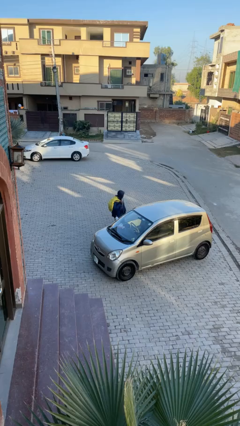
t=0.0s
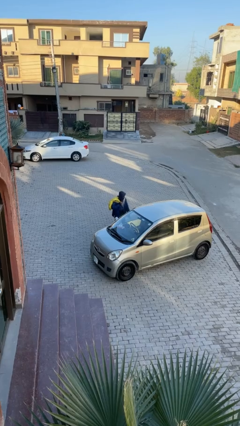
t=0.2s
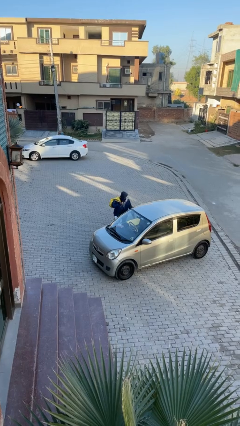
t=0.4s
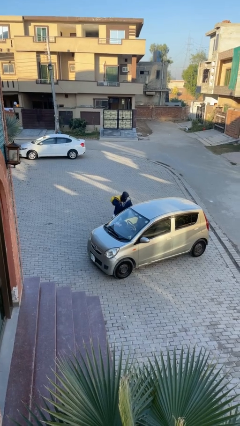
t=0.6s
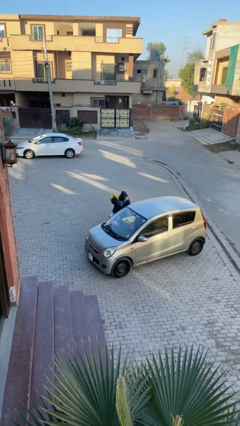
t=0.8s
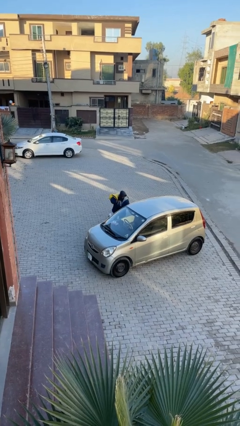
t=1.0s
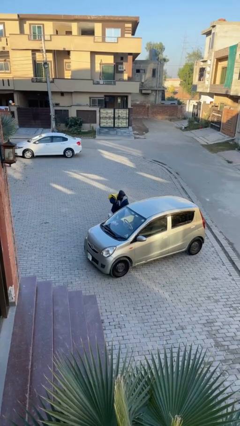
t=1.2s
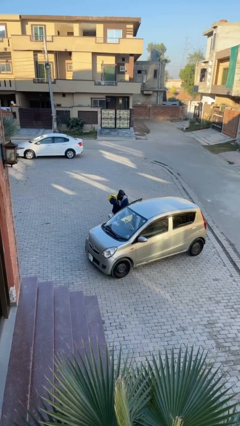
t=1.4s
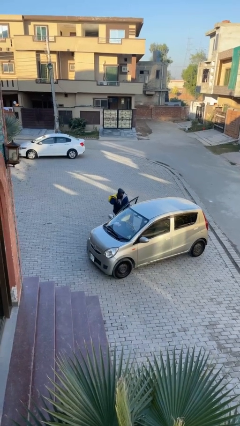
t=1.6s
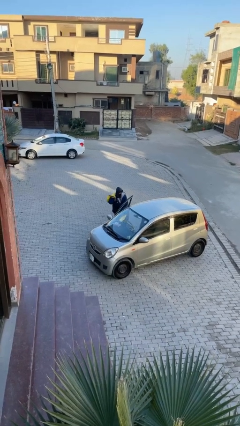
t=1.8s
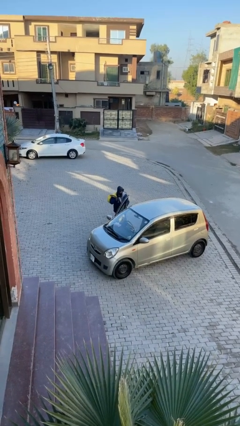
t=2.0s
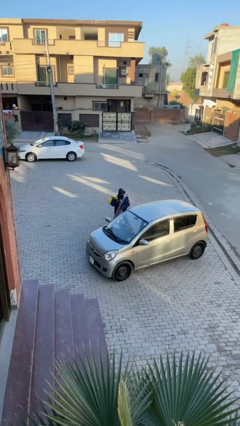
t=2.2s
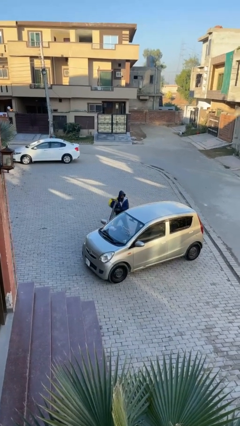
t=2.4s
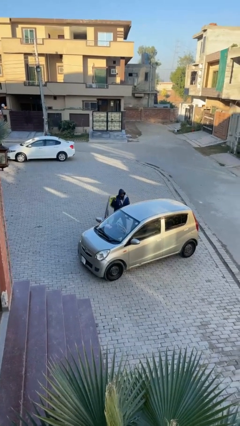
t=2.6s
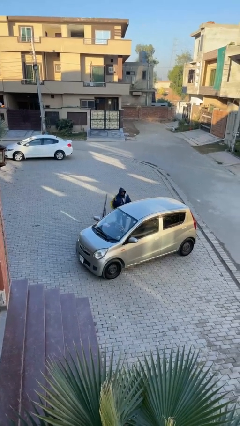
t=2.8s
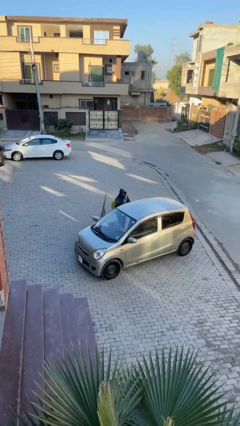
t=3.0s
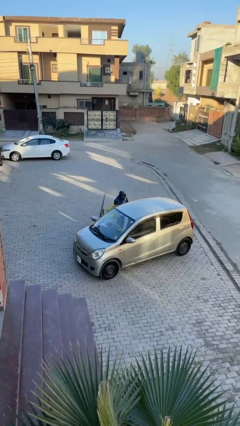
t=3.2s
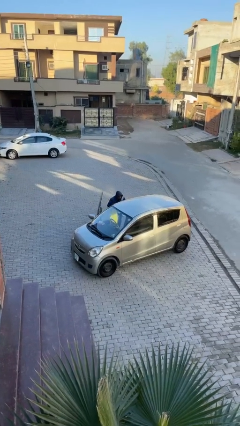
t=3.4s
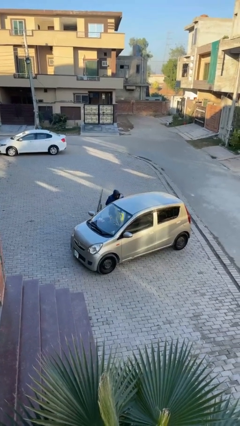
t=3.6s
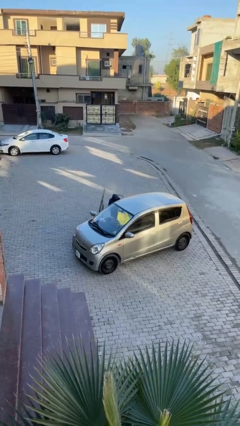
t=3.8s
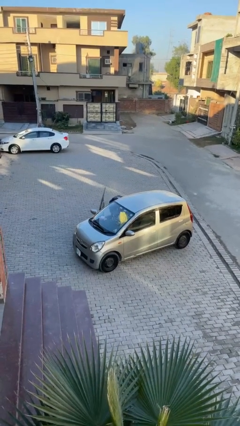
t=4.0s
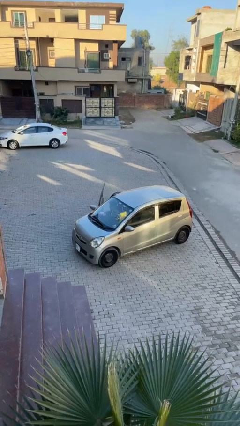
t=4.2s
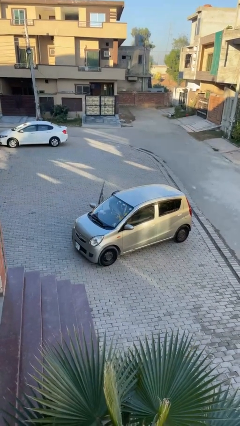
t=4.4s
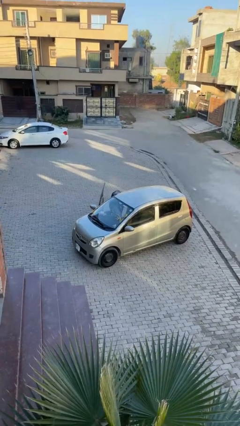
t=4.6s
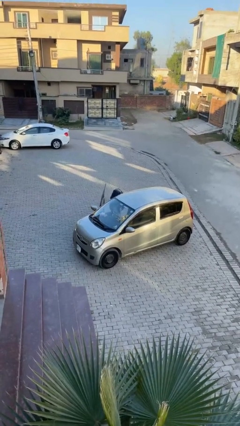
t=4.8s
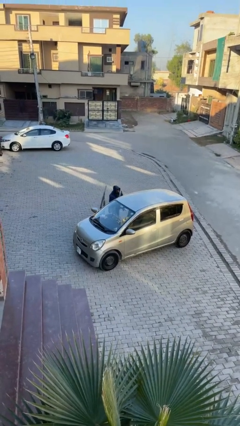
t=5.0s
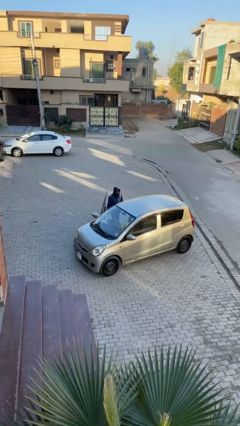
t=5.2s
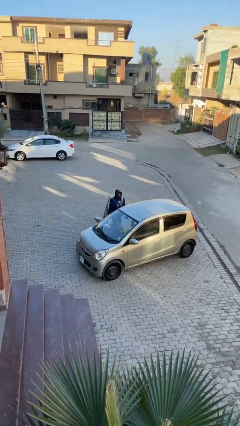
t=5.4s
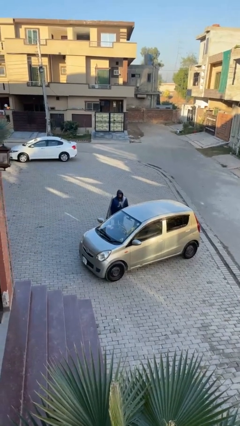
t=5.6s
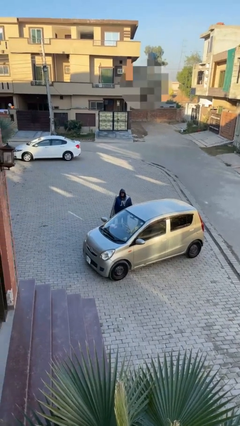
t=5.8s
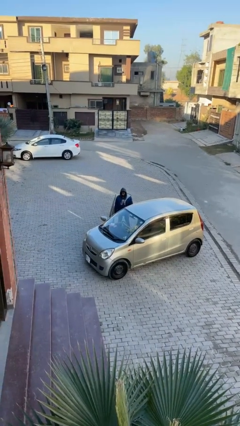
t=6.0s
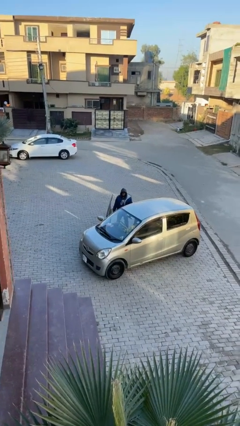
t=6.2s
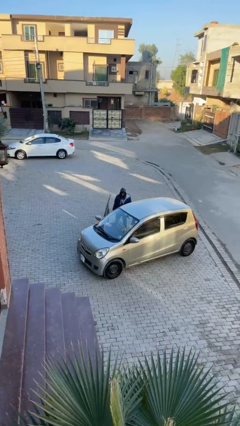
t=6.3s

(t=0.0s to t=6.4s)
person loads car

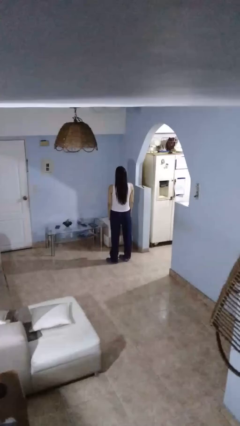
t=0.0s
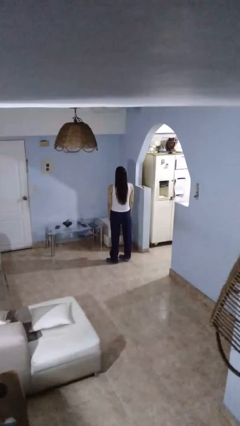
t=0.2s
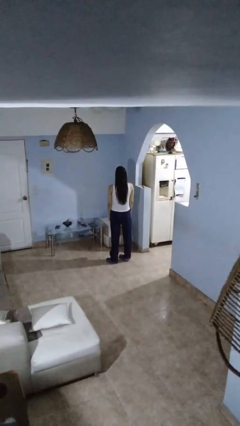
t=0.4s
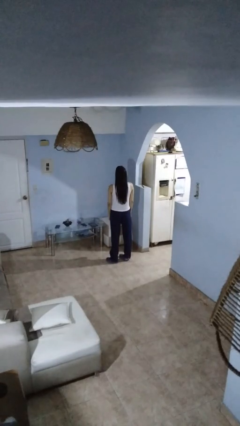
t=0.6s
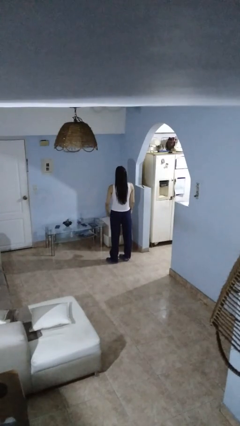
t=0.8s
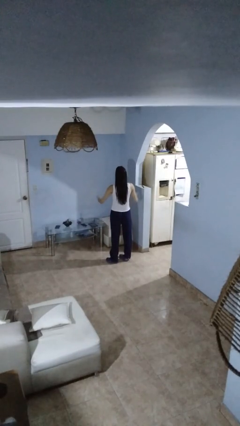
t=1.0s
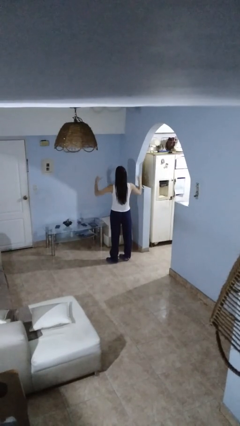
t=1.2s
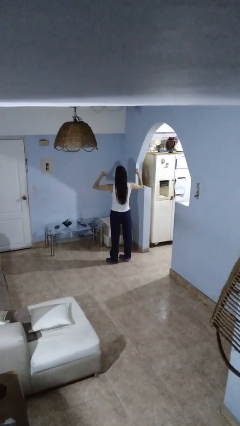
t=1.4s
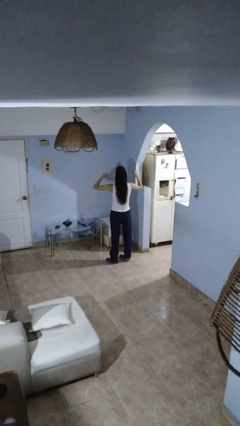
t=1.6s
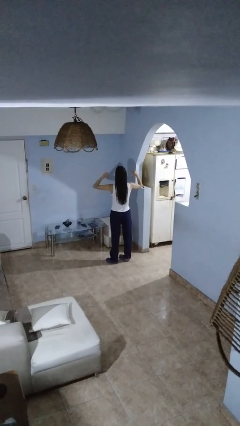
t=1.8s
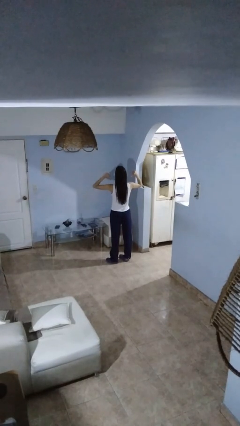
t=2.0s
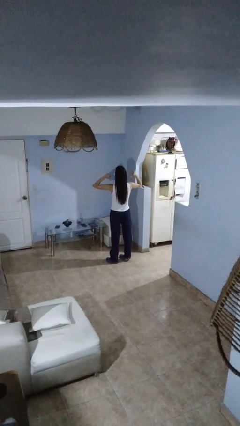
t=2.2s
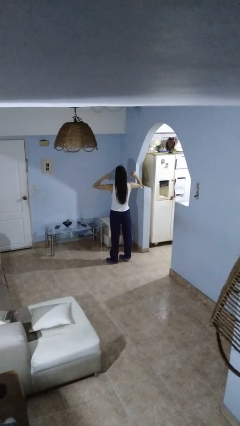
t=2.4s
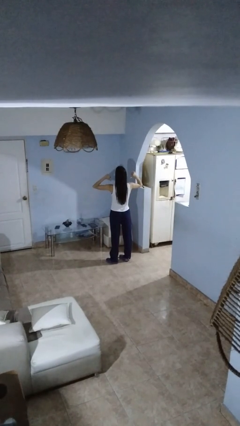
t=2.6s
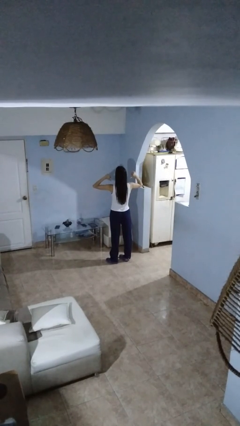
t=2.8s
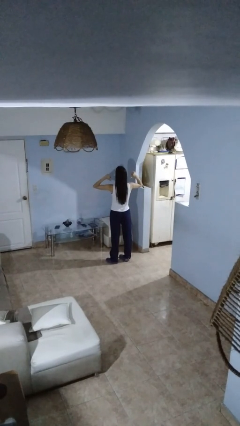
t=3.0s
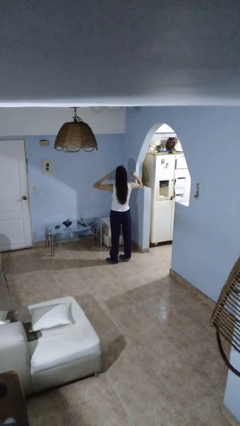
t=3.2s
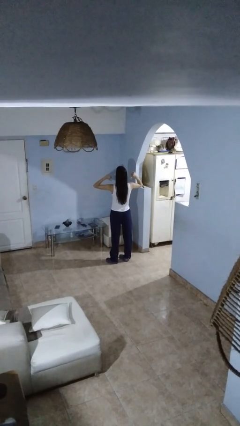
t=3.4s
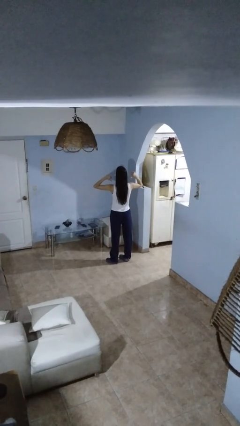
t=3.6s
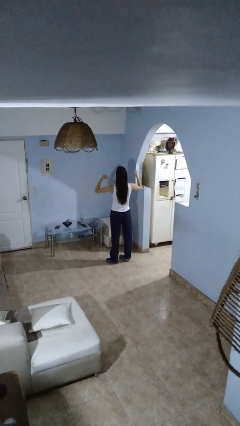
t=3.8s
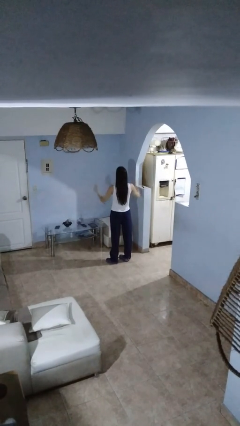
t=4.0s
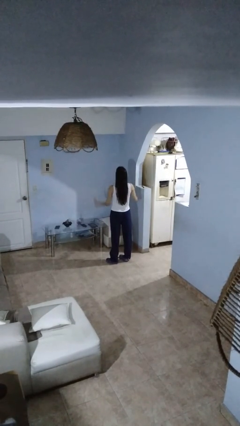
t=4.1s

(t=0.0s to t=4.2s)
person gestures thumbs down

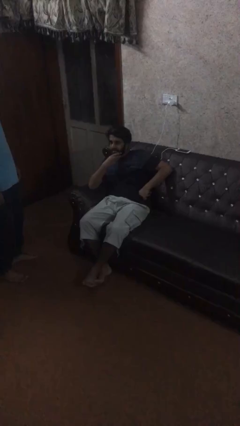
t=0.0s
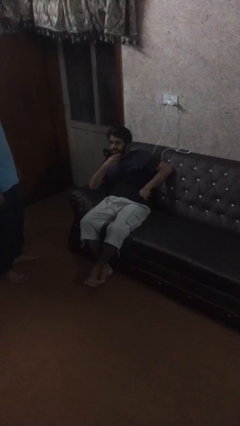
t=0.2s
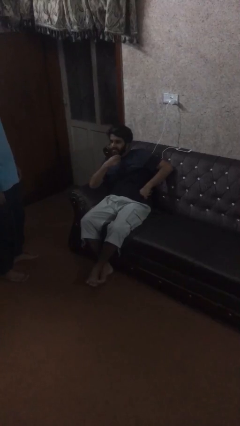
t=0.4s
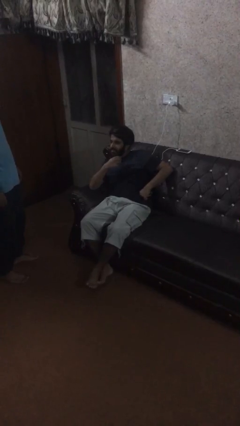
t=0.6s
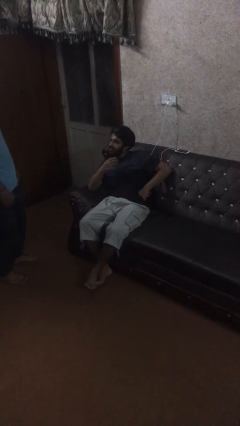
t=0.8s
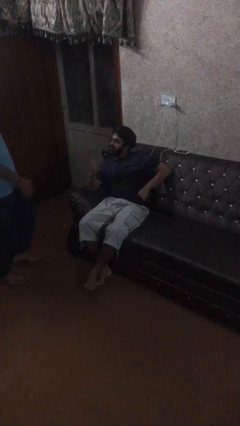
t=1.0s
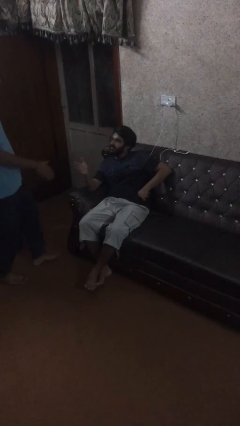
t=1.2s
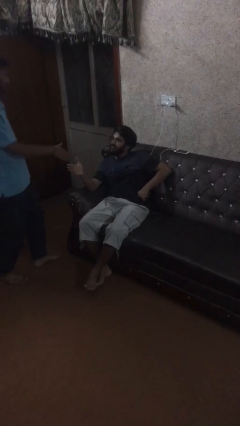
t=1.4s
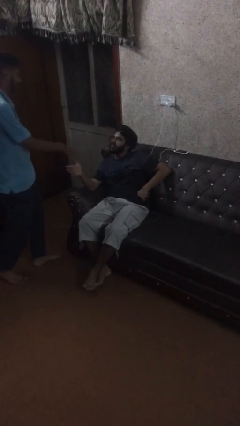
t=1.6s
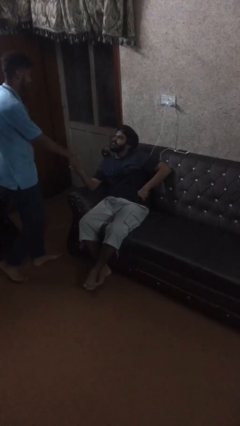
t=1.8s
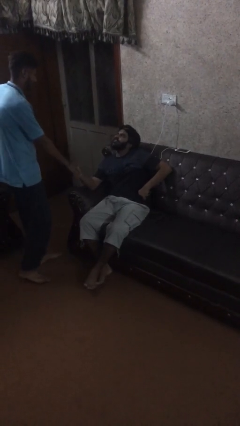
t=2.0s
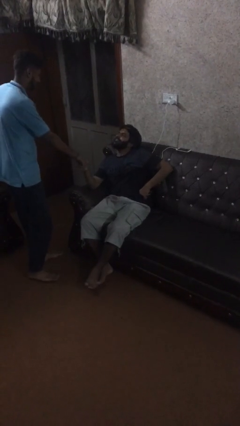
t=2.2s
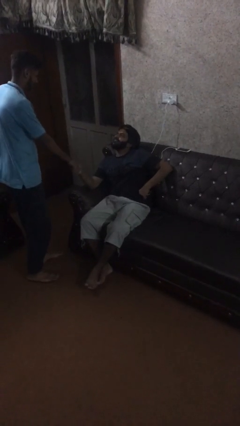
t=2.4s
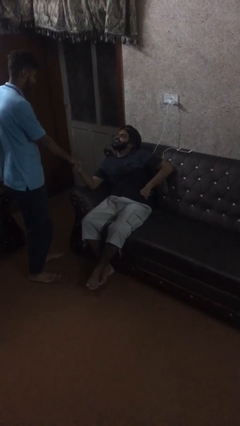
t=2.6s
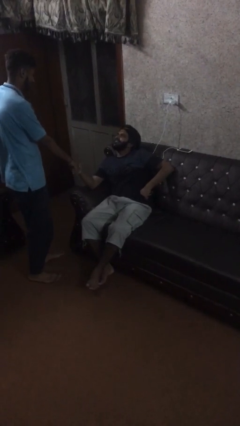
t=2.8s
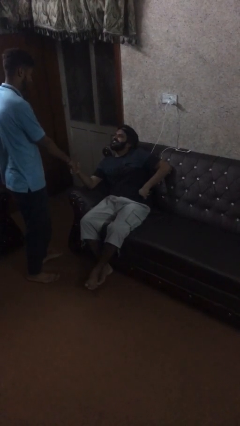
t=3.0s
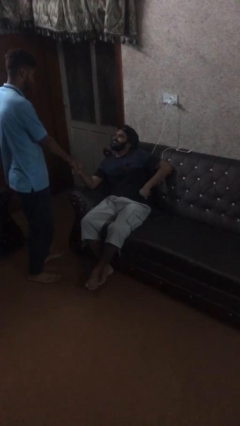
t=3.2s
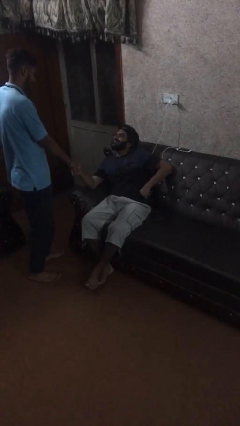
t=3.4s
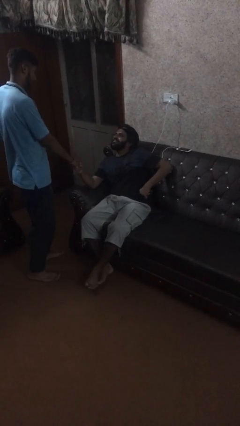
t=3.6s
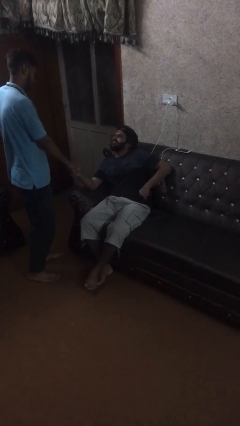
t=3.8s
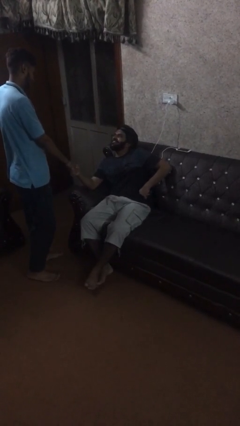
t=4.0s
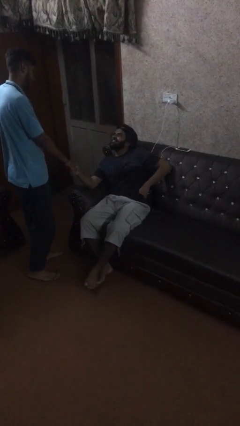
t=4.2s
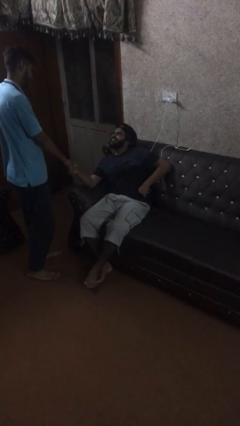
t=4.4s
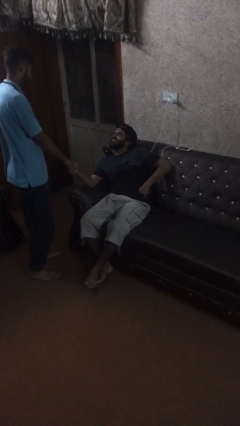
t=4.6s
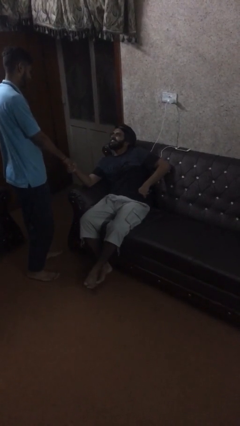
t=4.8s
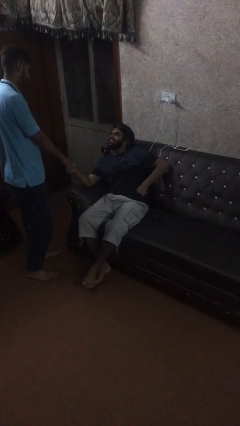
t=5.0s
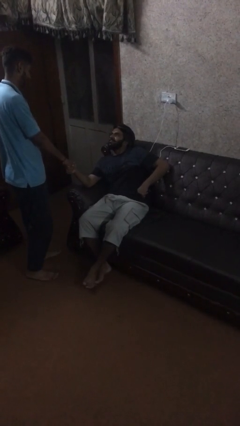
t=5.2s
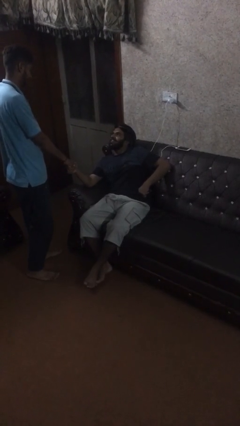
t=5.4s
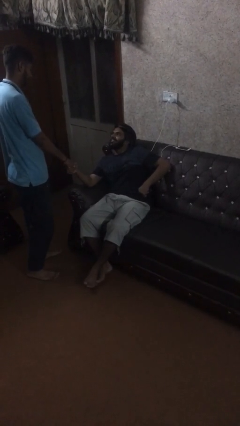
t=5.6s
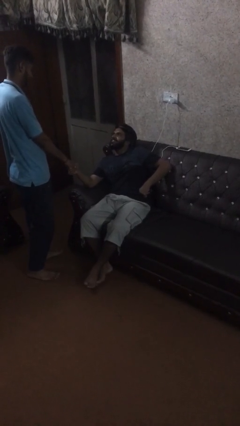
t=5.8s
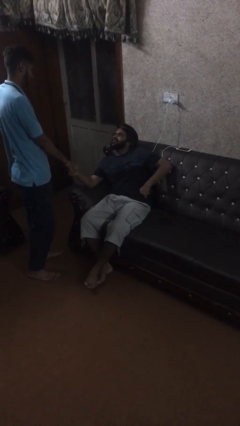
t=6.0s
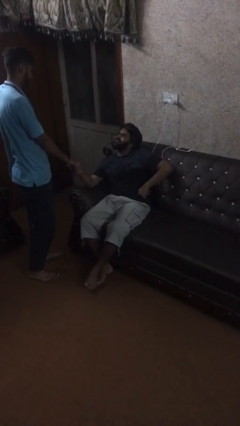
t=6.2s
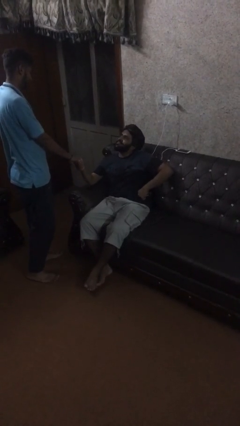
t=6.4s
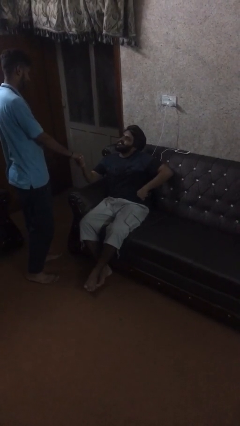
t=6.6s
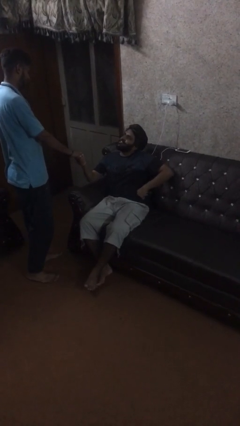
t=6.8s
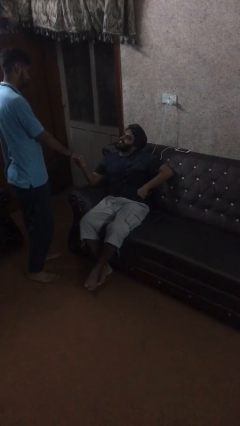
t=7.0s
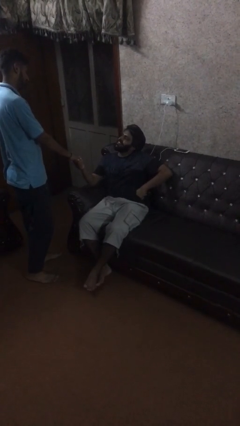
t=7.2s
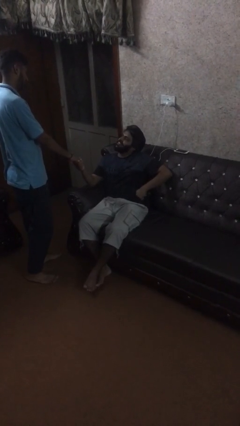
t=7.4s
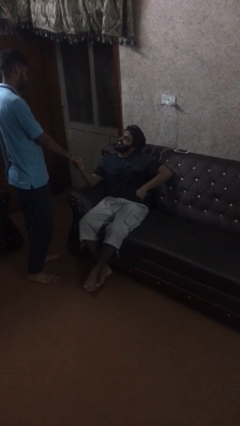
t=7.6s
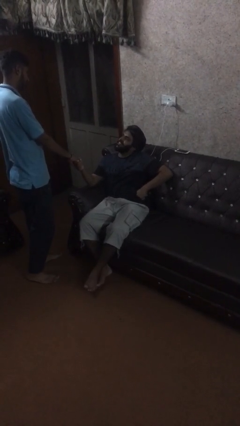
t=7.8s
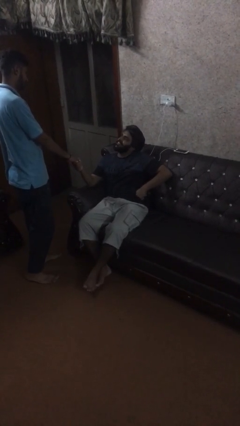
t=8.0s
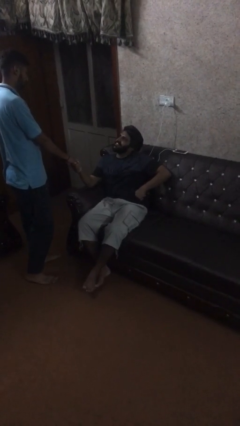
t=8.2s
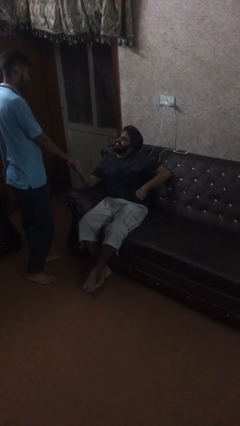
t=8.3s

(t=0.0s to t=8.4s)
person shakes hand
